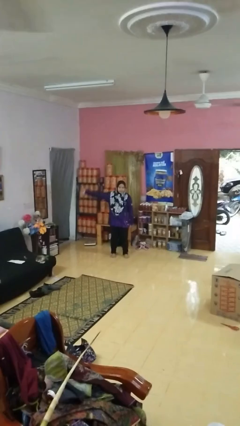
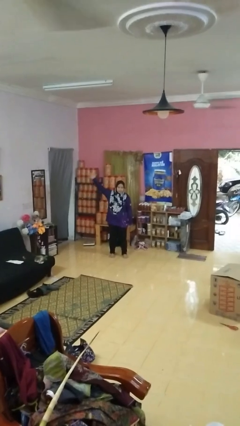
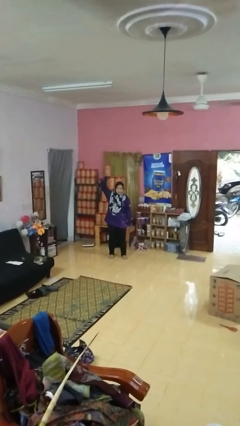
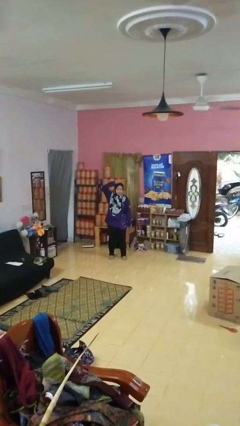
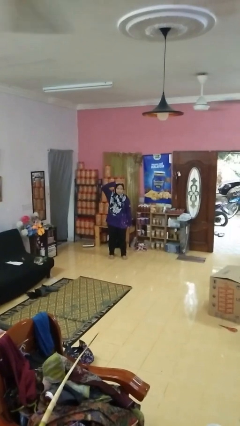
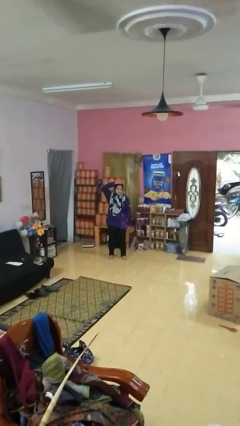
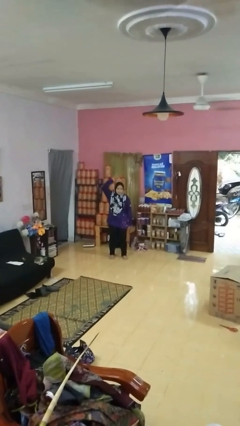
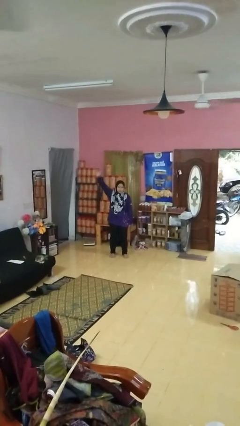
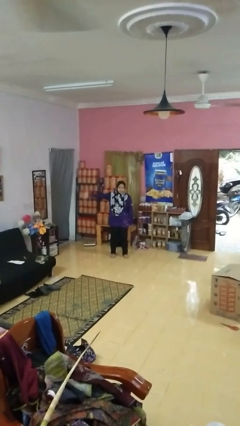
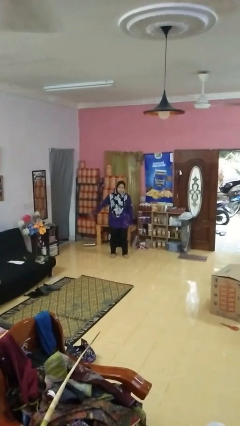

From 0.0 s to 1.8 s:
person pats head

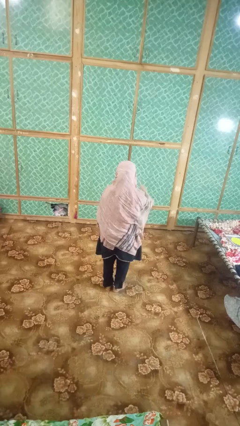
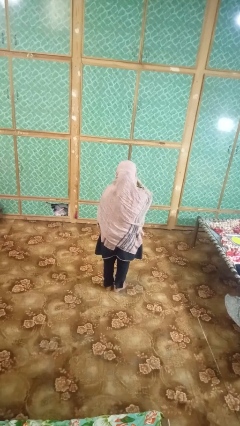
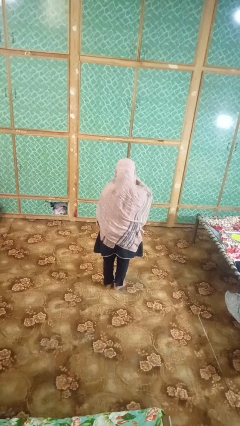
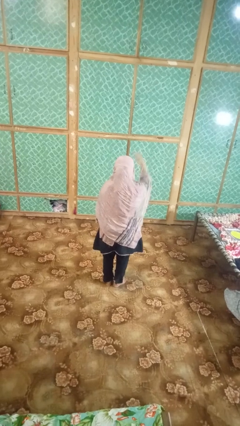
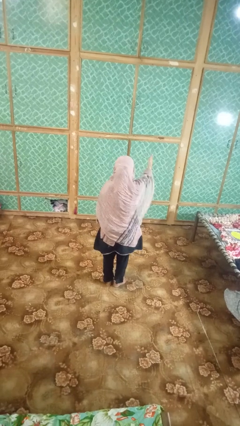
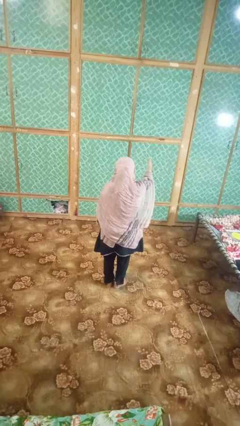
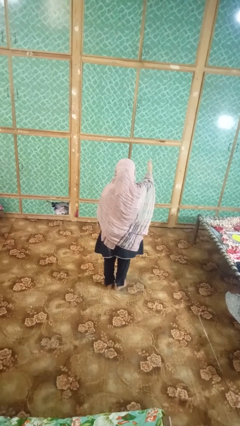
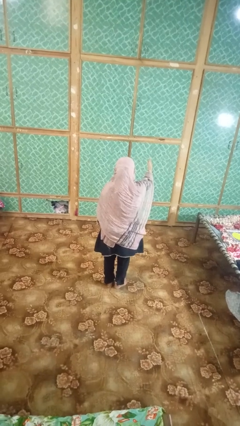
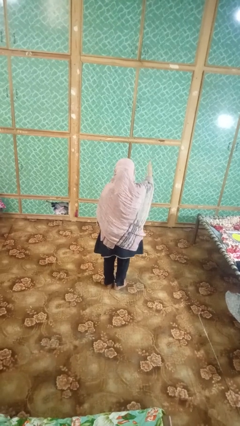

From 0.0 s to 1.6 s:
person gestures blow kiss

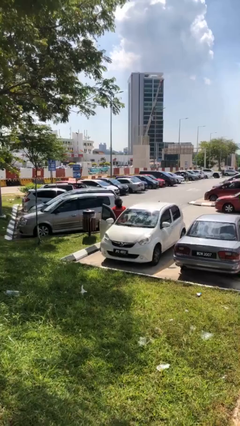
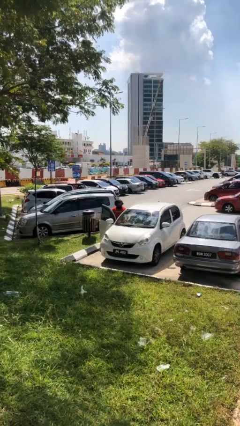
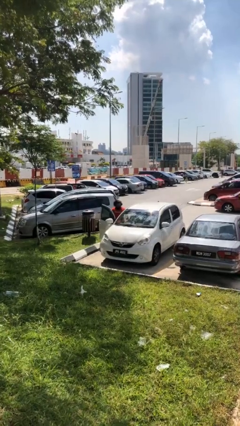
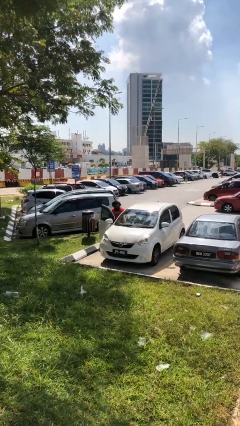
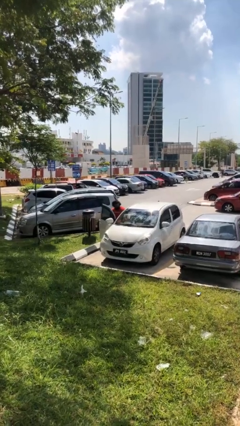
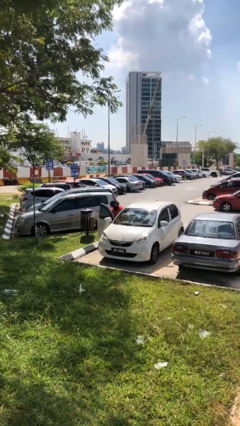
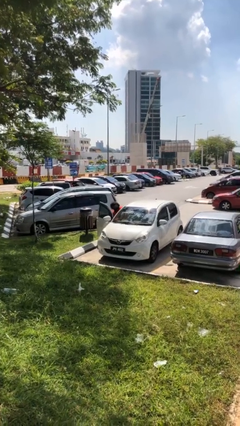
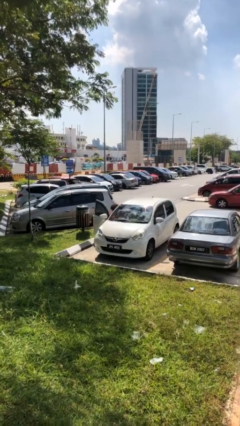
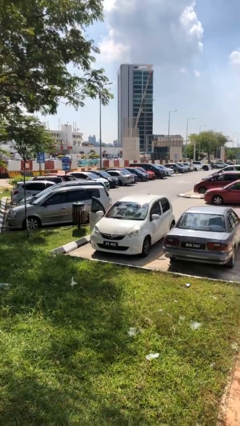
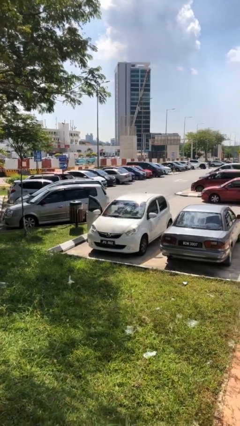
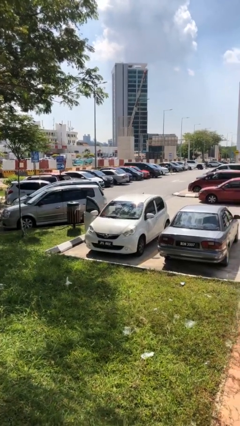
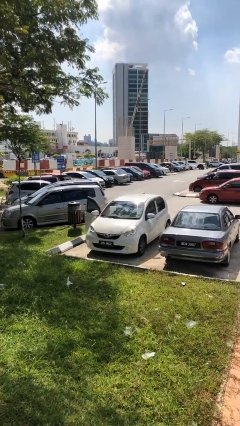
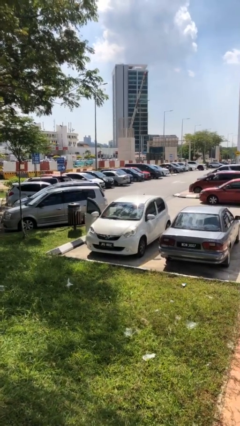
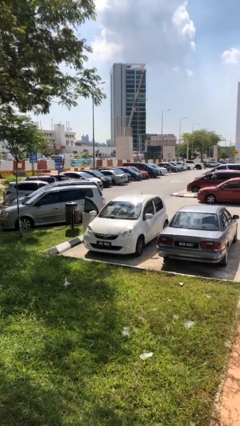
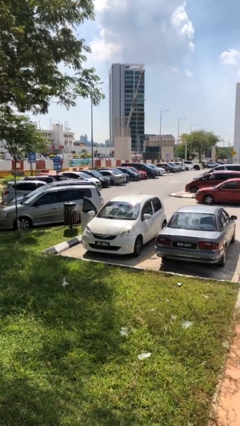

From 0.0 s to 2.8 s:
person enters car

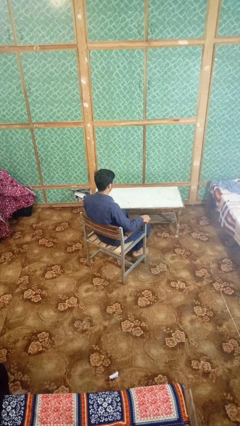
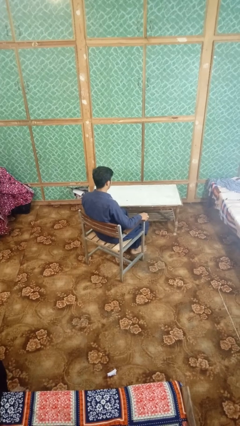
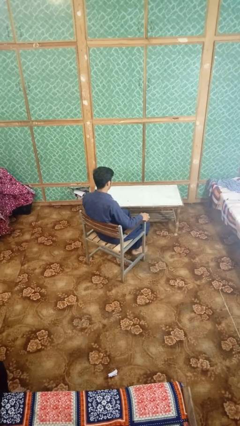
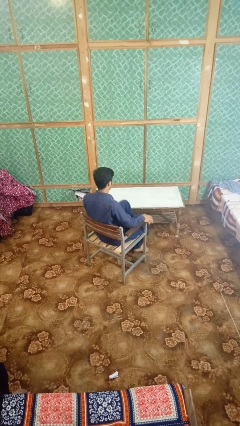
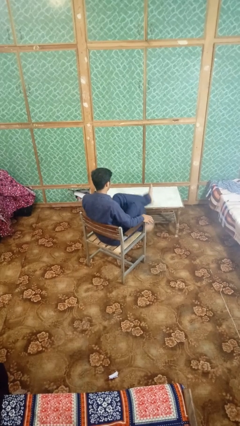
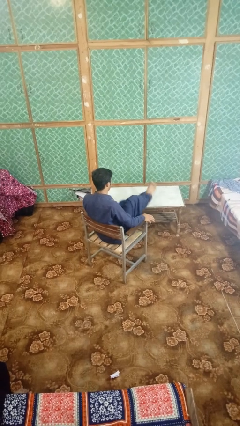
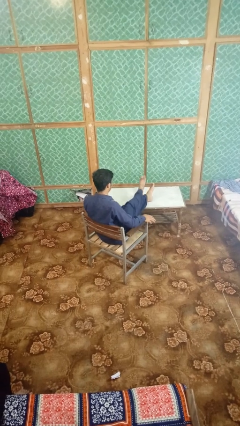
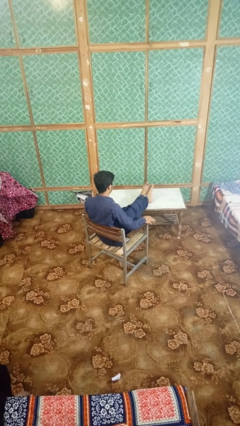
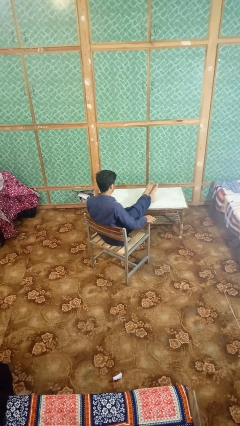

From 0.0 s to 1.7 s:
person puts feet up

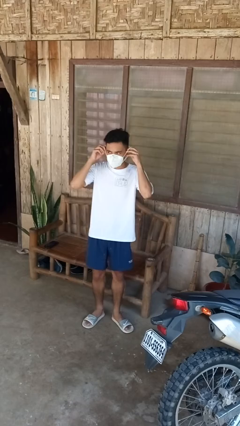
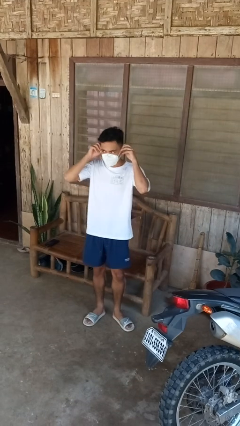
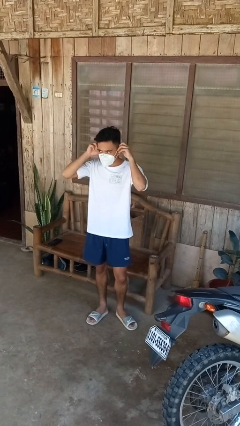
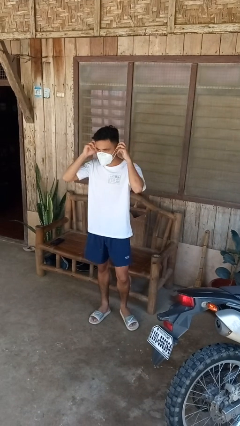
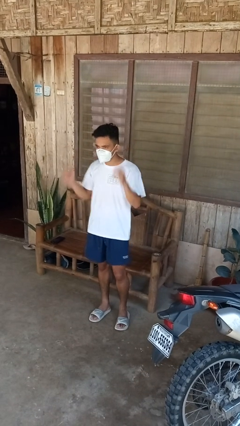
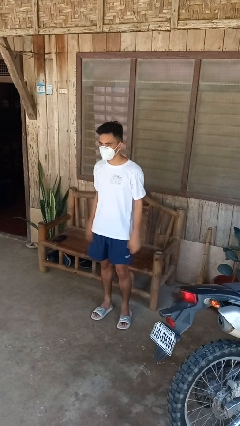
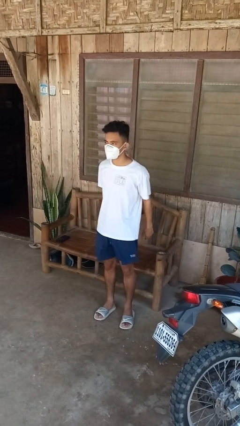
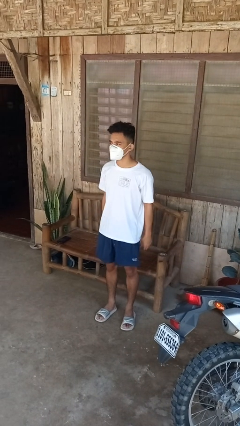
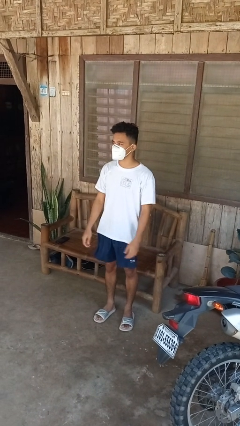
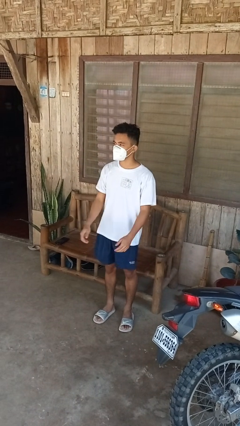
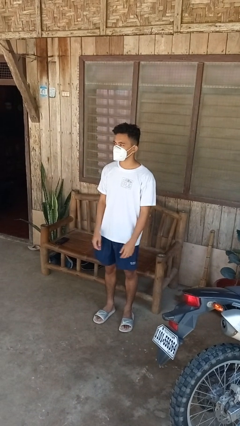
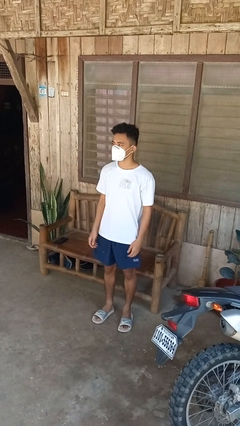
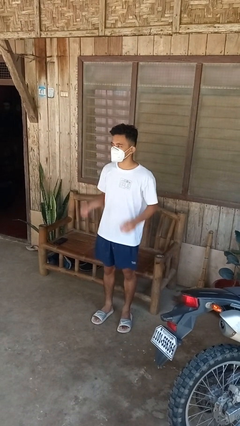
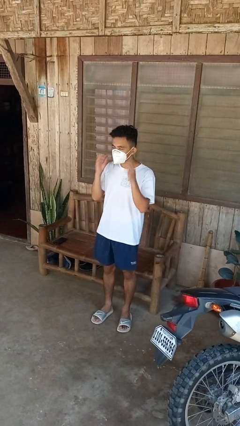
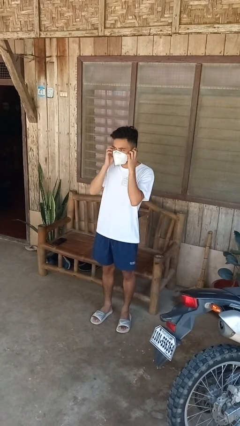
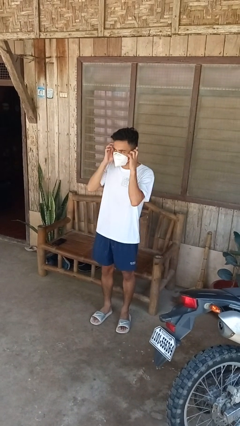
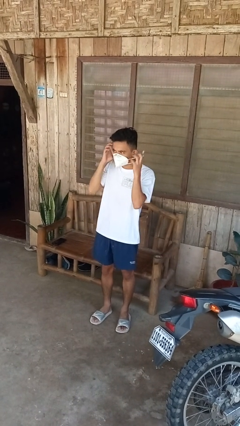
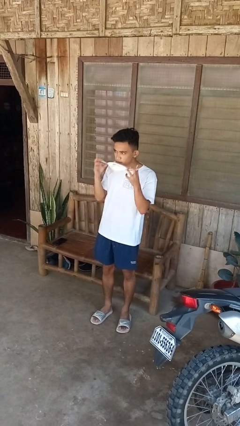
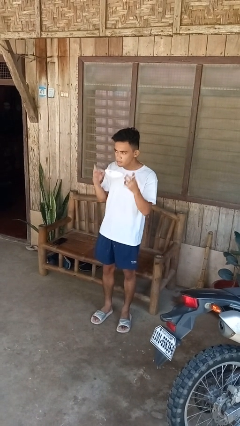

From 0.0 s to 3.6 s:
person puts on facemask

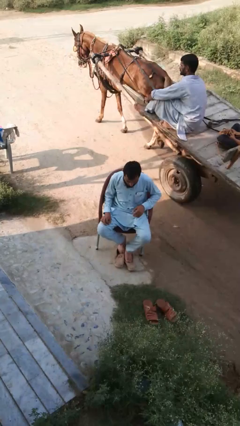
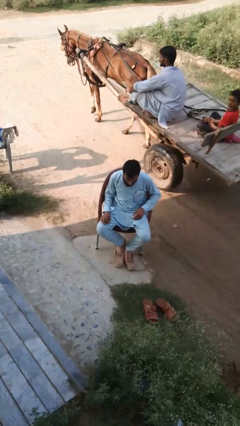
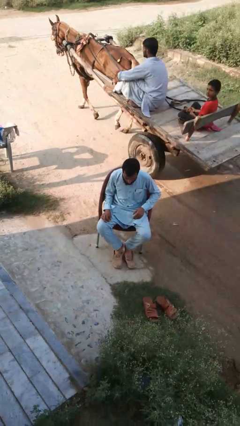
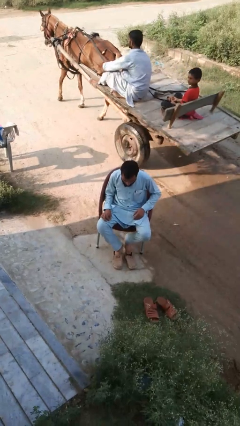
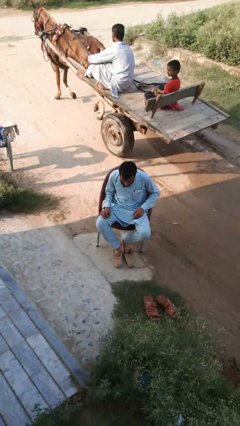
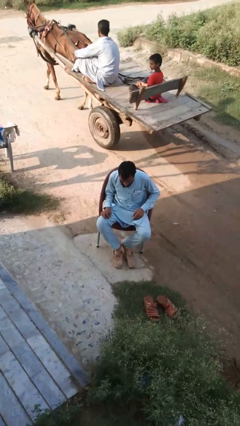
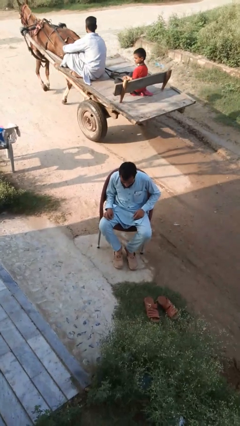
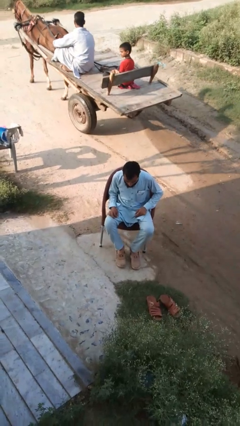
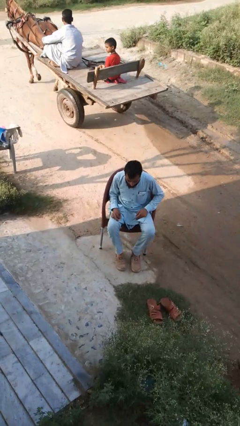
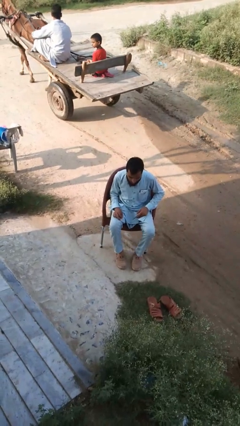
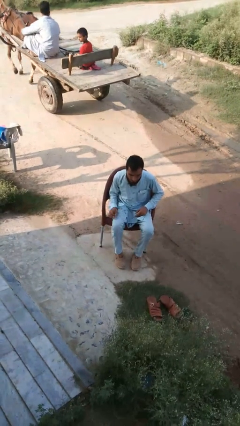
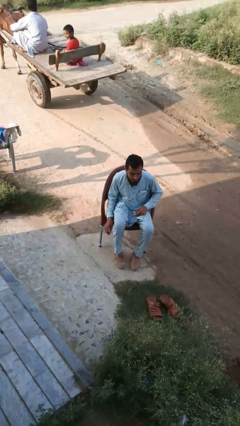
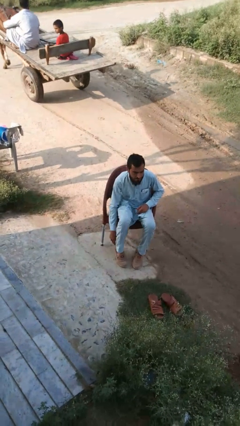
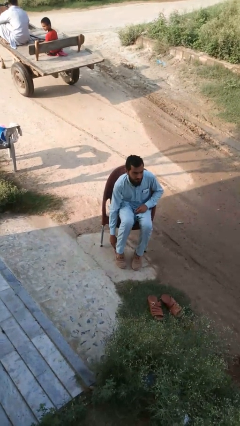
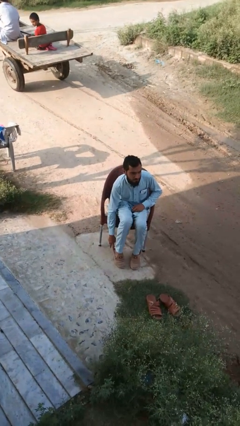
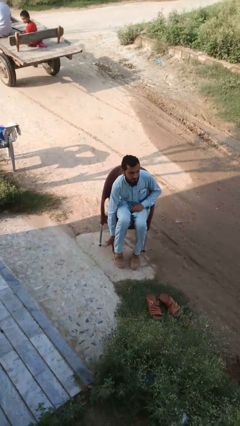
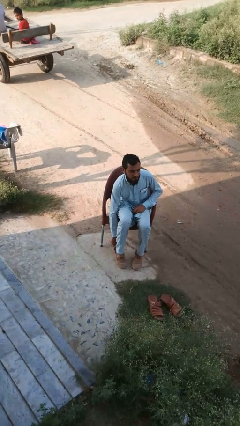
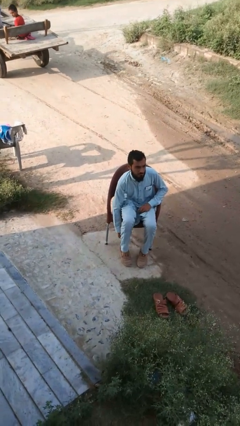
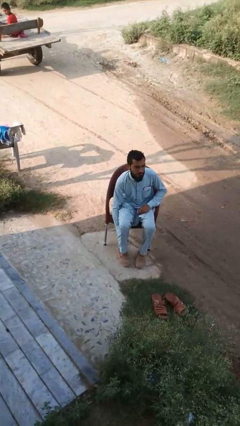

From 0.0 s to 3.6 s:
person puts on shoes

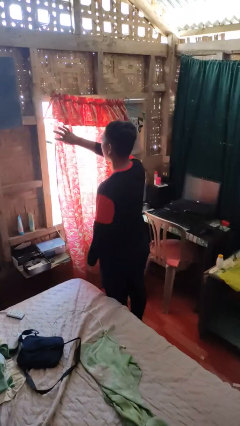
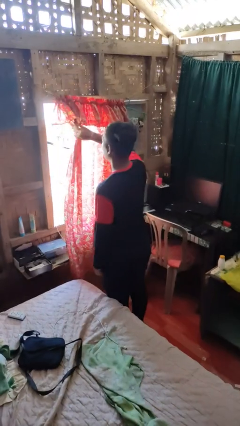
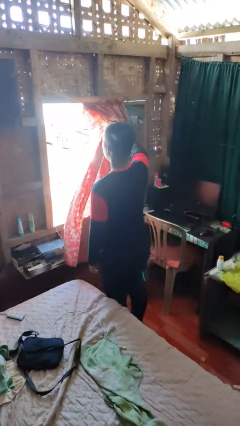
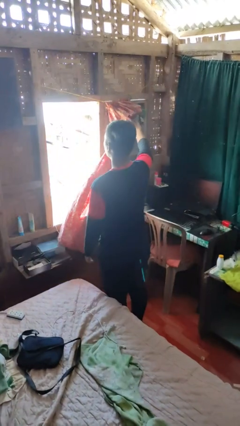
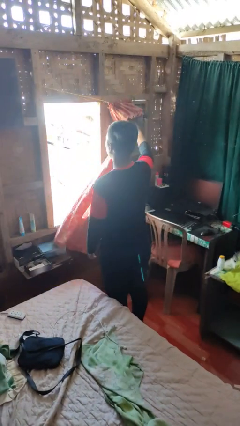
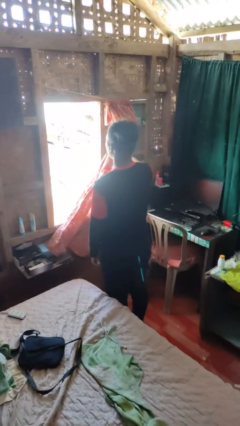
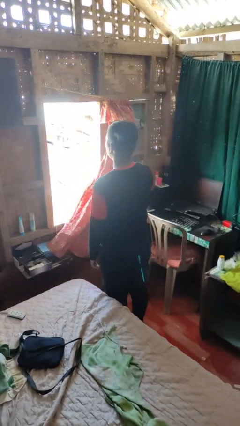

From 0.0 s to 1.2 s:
person opens curtains

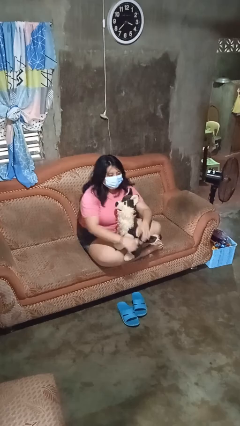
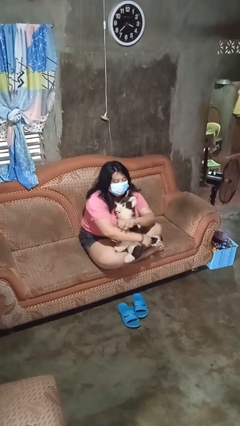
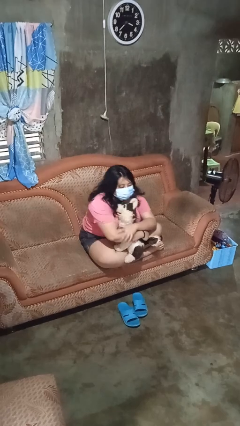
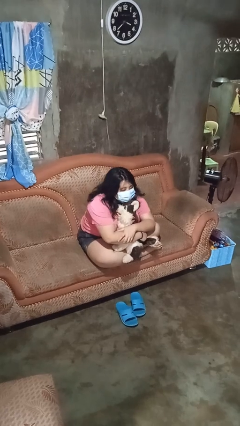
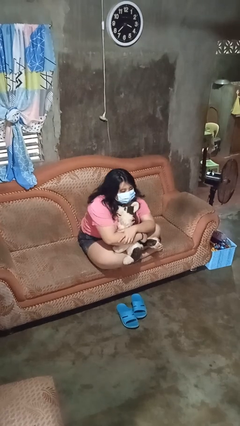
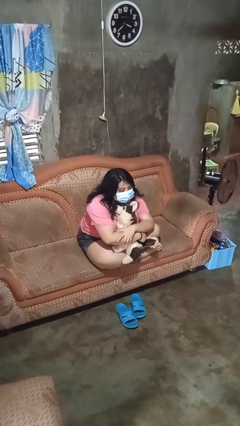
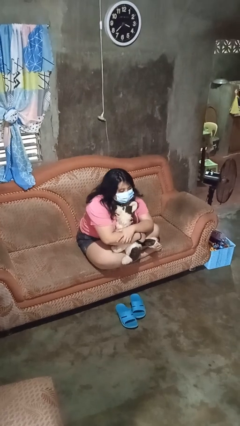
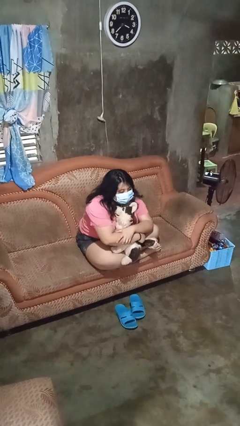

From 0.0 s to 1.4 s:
person hugs stuffed animal
